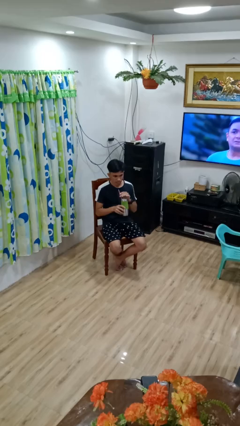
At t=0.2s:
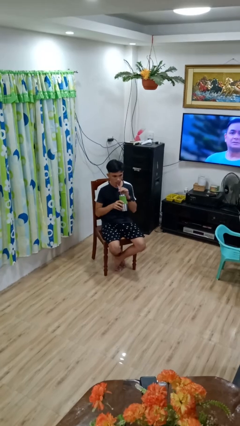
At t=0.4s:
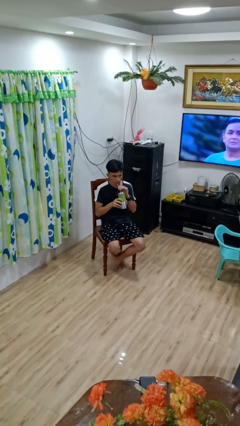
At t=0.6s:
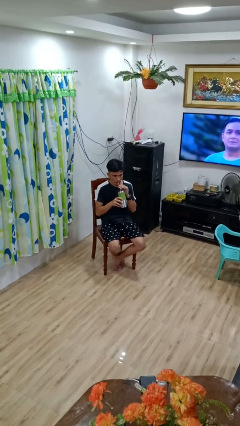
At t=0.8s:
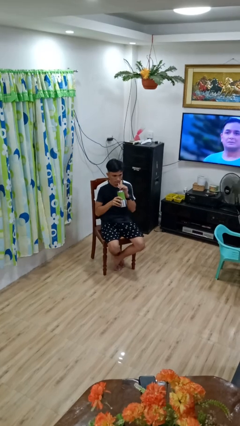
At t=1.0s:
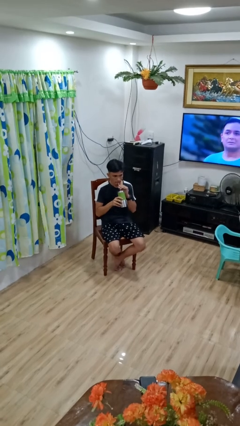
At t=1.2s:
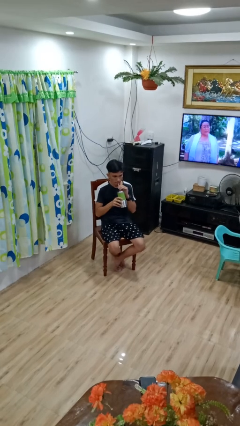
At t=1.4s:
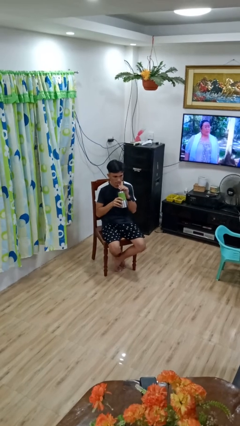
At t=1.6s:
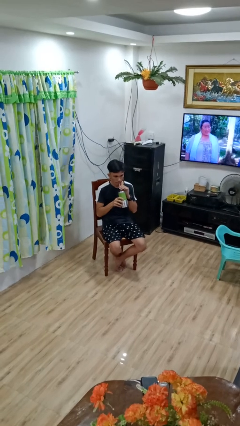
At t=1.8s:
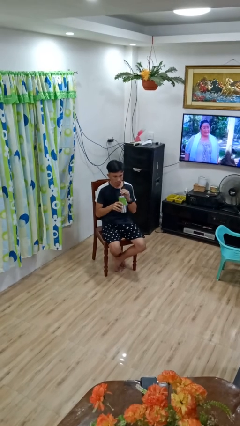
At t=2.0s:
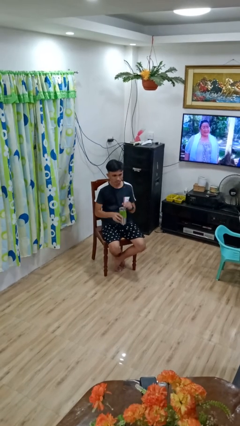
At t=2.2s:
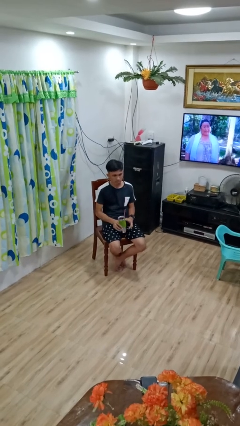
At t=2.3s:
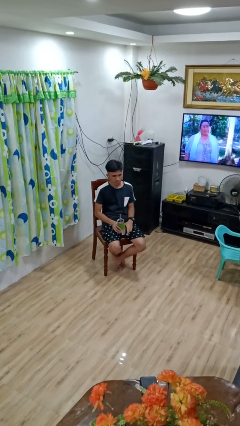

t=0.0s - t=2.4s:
person drinks from straw

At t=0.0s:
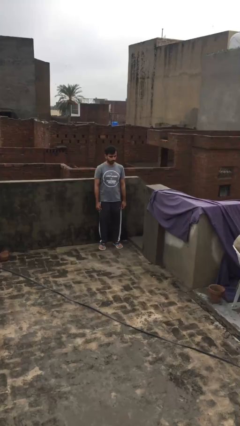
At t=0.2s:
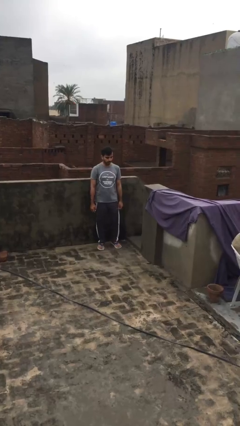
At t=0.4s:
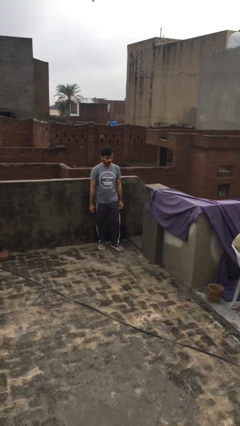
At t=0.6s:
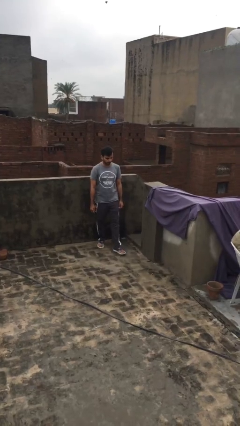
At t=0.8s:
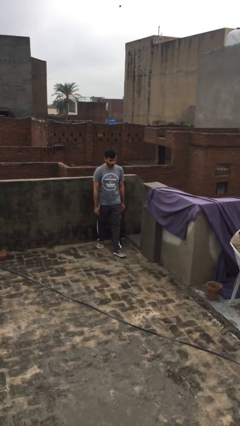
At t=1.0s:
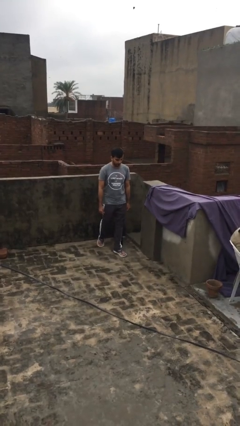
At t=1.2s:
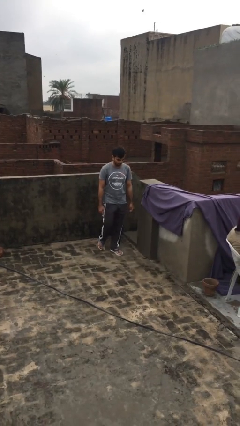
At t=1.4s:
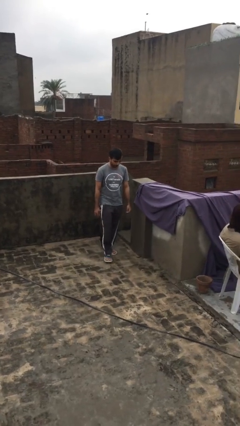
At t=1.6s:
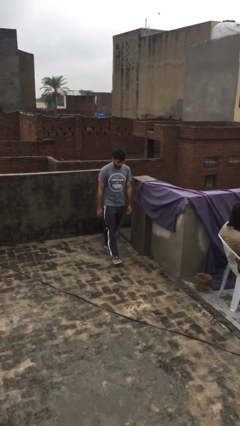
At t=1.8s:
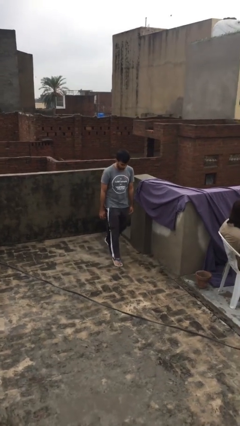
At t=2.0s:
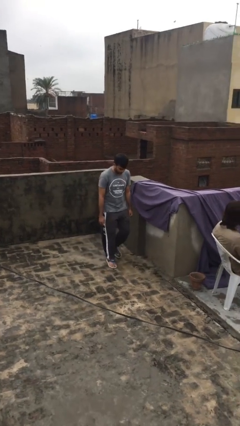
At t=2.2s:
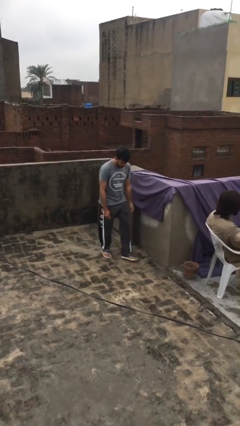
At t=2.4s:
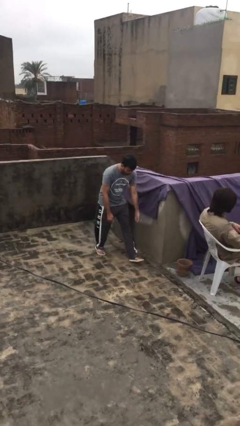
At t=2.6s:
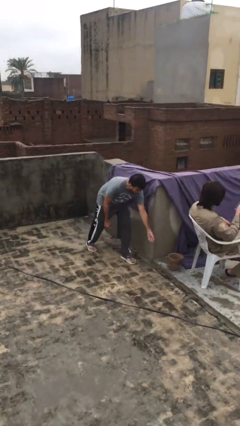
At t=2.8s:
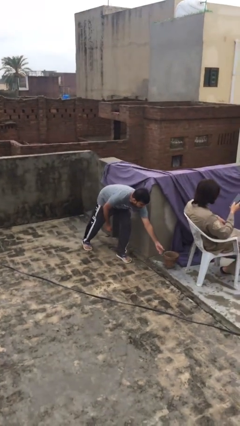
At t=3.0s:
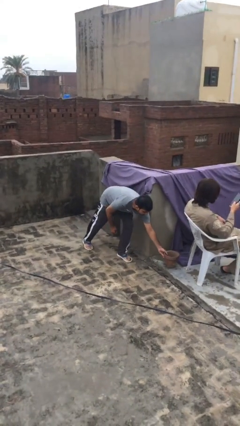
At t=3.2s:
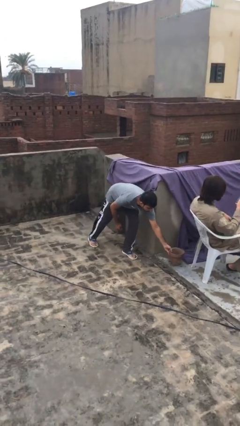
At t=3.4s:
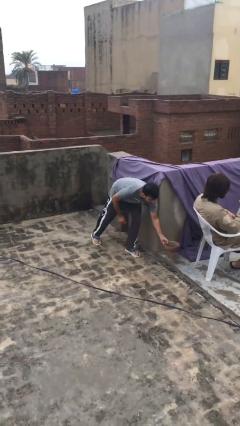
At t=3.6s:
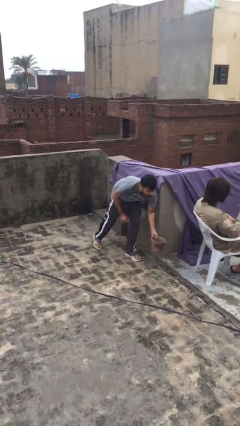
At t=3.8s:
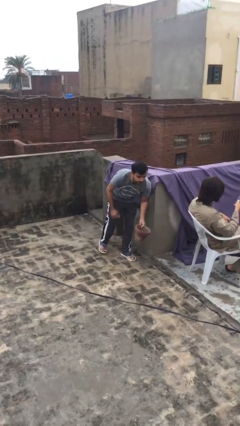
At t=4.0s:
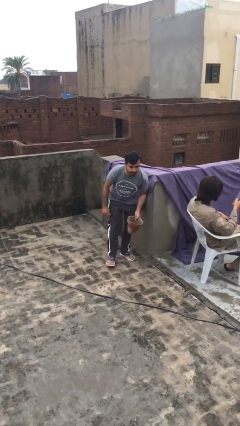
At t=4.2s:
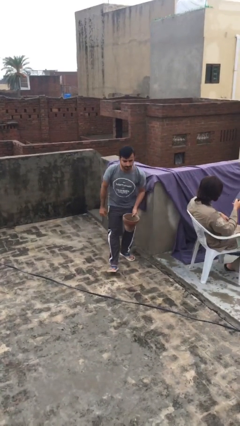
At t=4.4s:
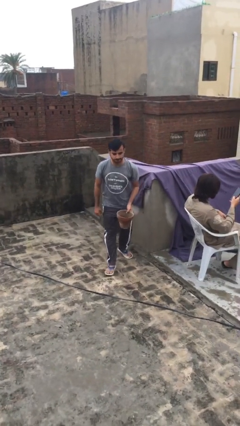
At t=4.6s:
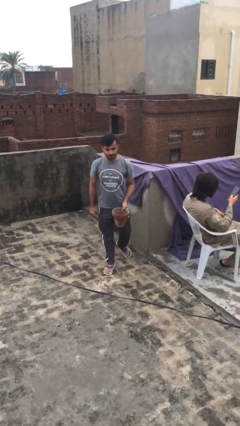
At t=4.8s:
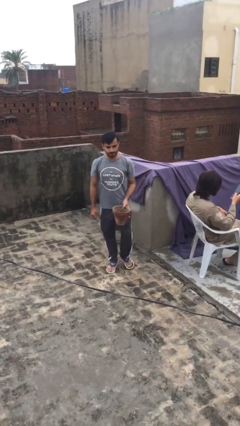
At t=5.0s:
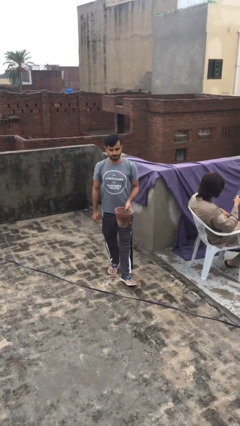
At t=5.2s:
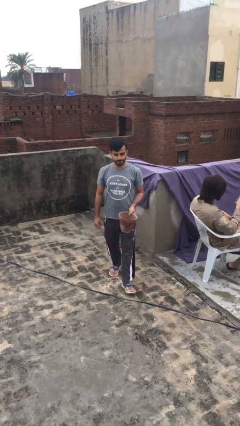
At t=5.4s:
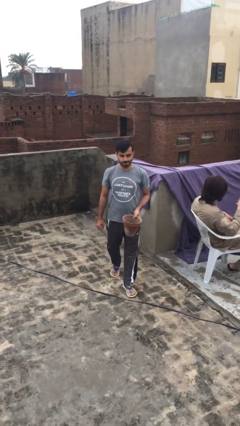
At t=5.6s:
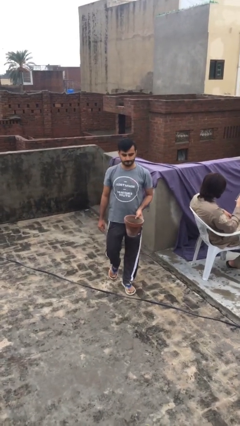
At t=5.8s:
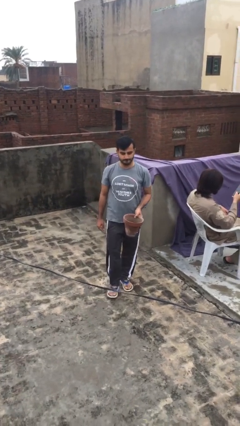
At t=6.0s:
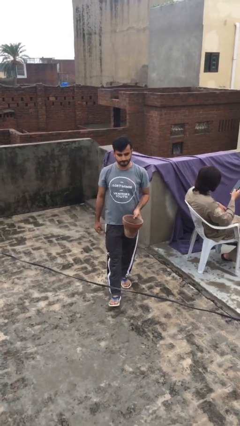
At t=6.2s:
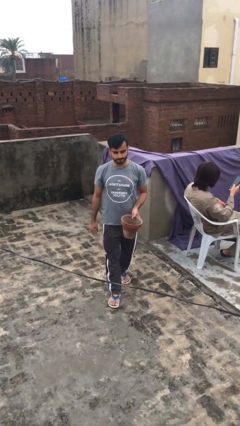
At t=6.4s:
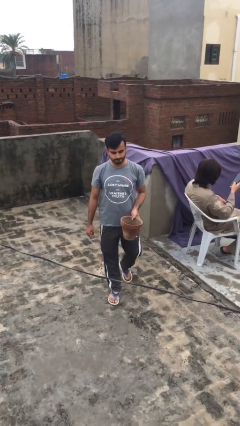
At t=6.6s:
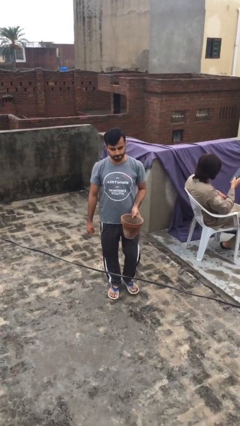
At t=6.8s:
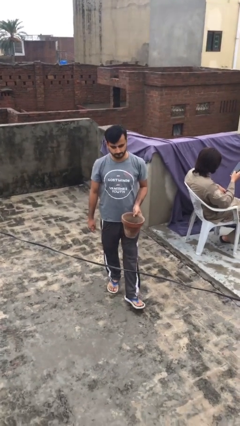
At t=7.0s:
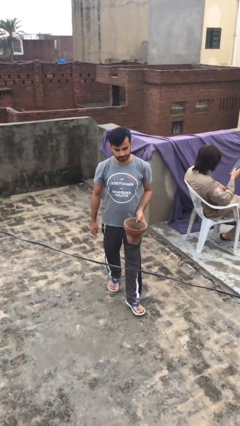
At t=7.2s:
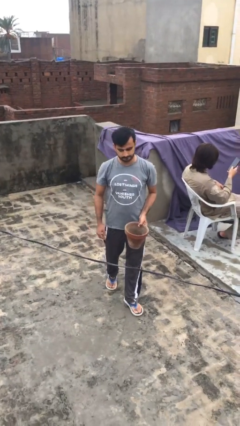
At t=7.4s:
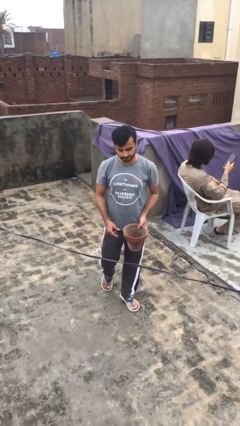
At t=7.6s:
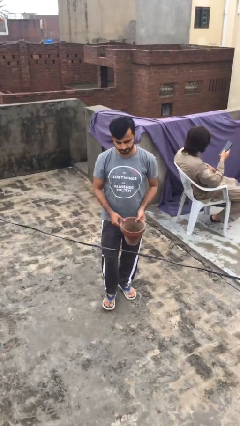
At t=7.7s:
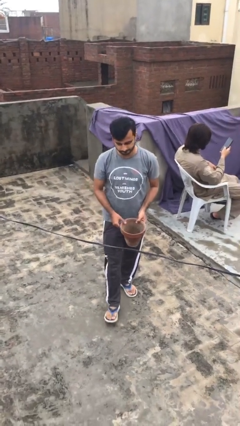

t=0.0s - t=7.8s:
person steals object from person

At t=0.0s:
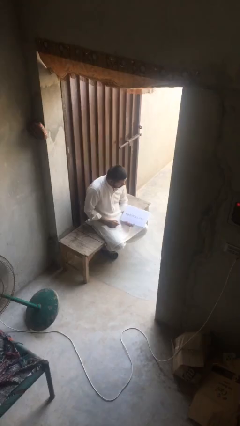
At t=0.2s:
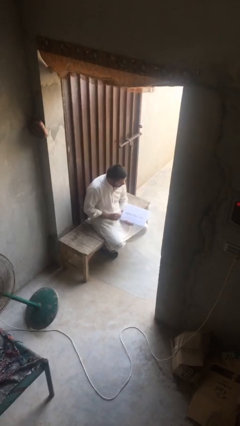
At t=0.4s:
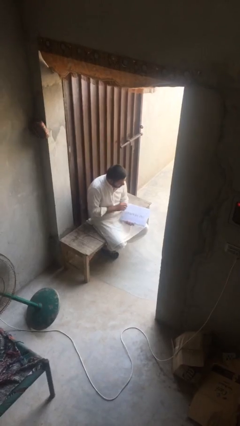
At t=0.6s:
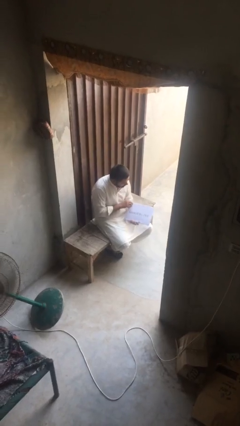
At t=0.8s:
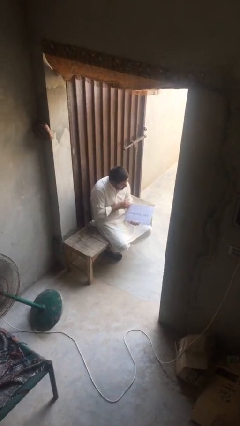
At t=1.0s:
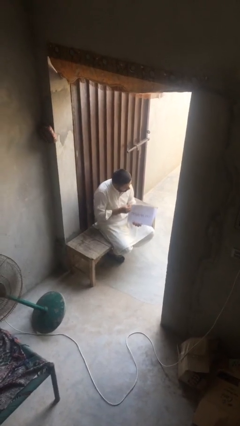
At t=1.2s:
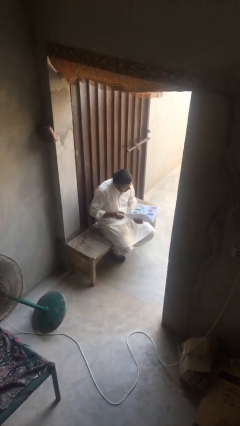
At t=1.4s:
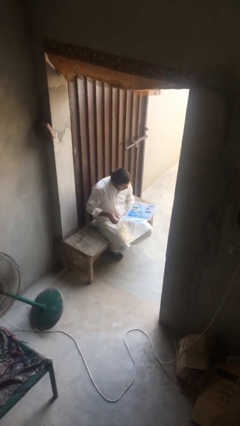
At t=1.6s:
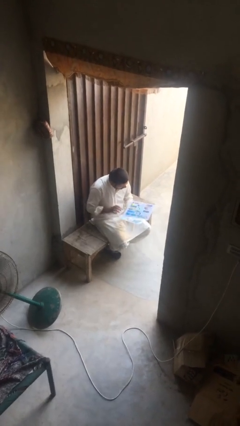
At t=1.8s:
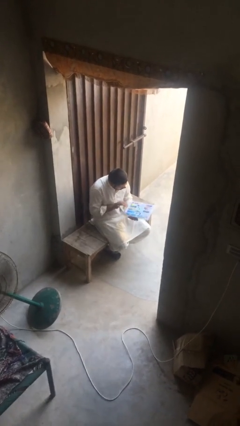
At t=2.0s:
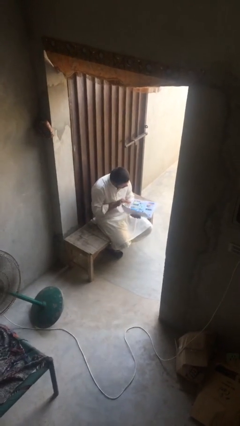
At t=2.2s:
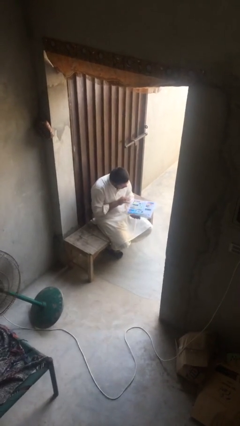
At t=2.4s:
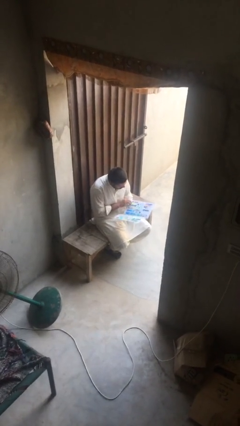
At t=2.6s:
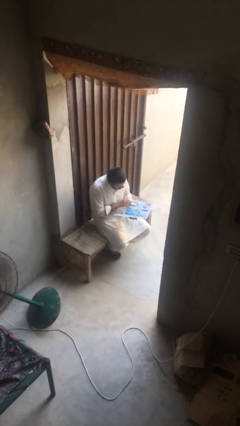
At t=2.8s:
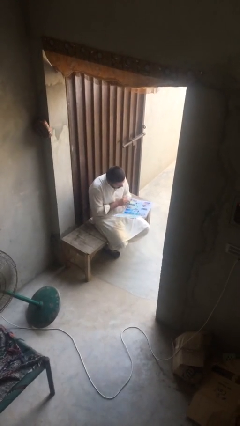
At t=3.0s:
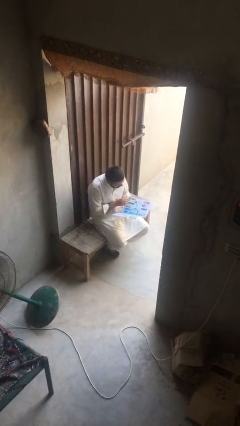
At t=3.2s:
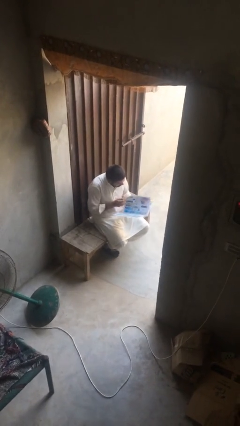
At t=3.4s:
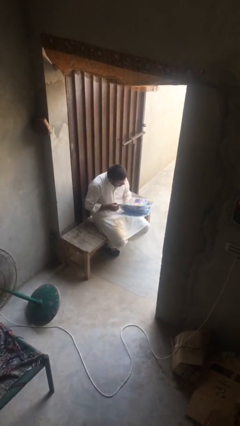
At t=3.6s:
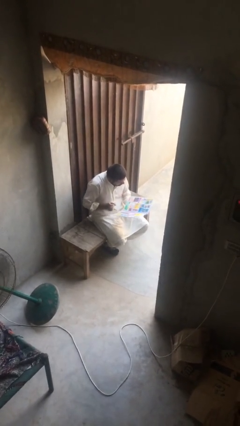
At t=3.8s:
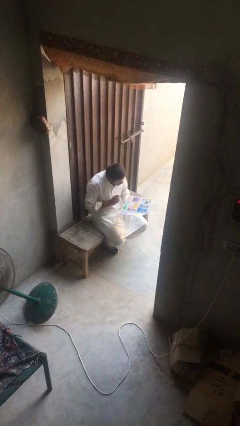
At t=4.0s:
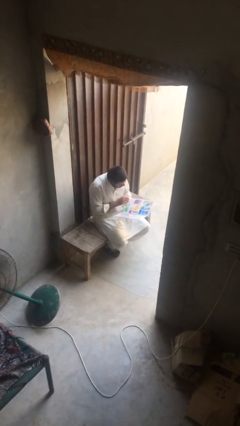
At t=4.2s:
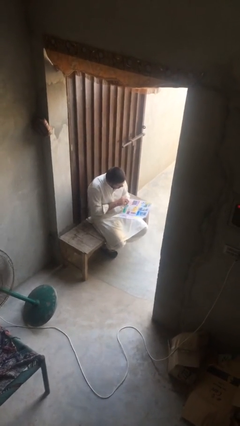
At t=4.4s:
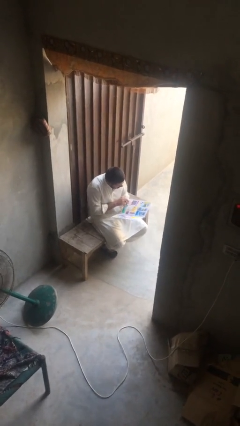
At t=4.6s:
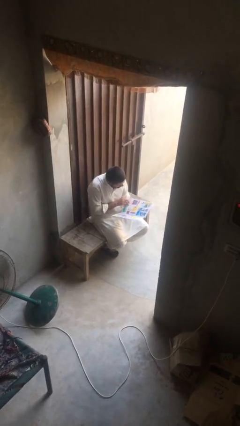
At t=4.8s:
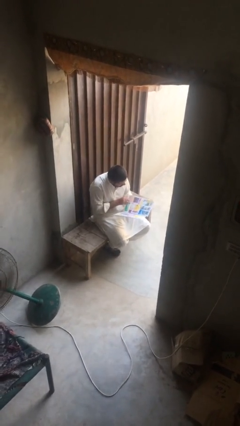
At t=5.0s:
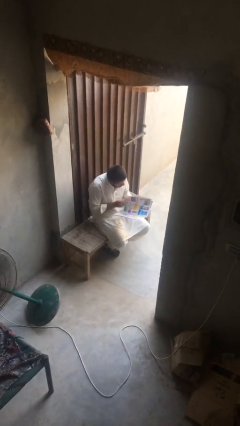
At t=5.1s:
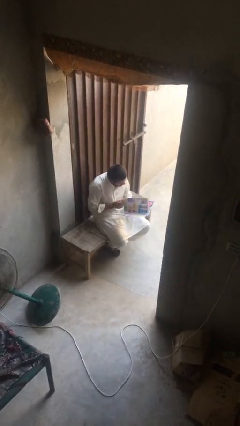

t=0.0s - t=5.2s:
person reads document

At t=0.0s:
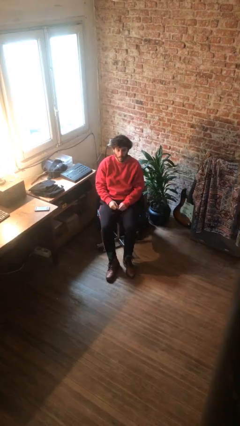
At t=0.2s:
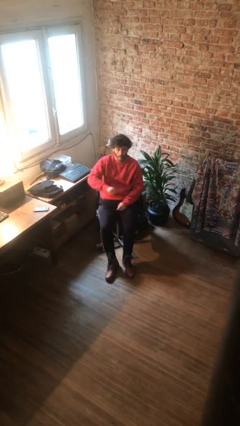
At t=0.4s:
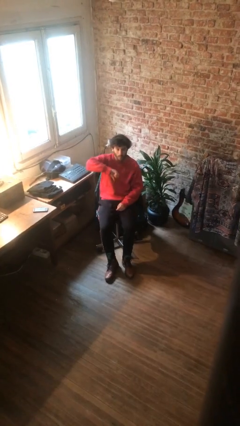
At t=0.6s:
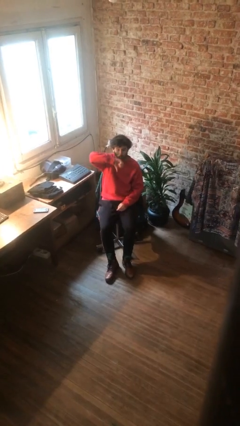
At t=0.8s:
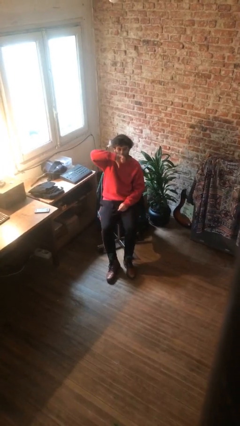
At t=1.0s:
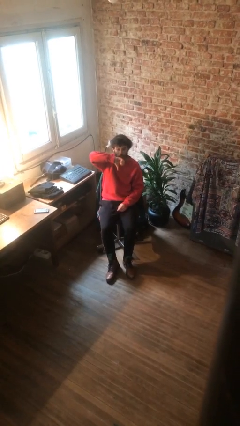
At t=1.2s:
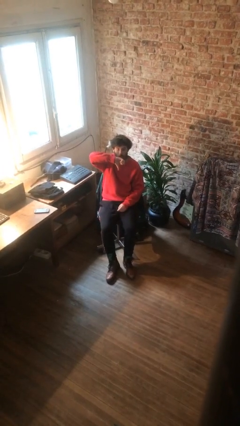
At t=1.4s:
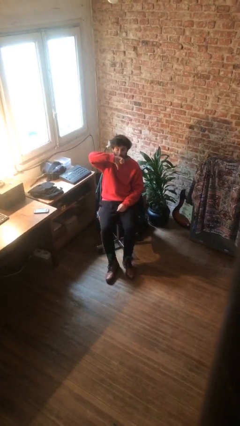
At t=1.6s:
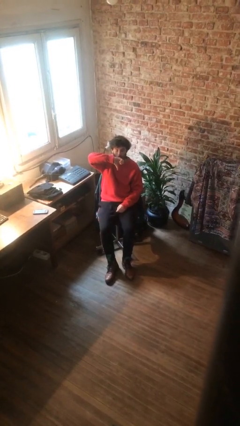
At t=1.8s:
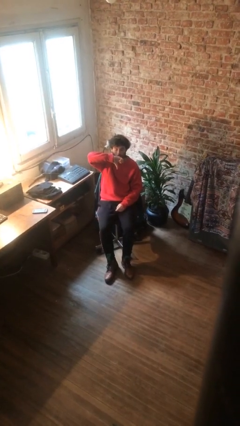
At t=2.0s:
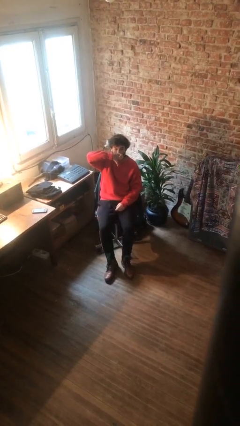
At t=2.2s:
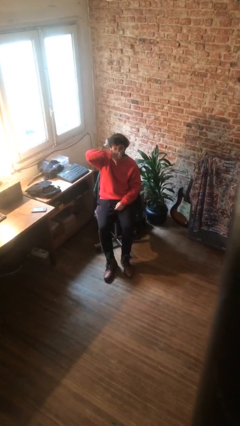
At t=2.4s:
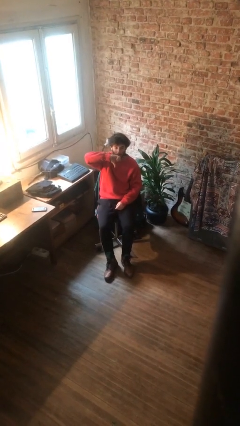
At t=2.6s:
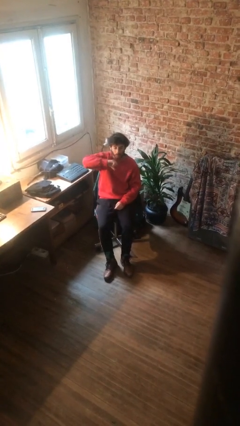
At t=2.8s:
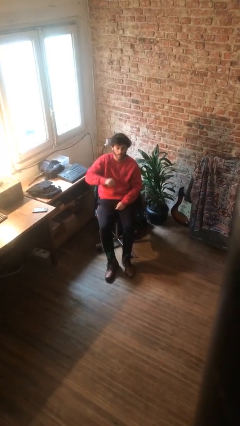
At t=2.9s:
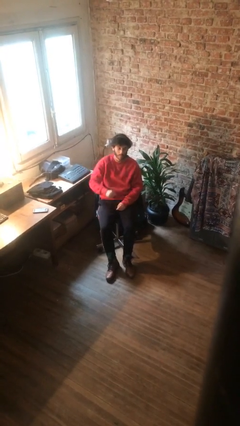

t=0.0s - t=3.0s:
person gestures thumbs down
